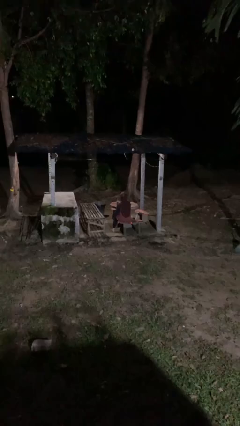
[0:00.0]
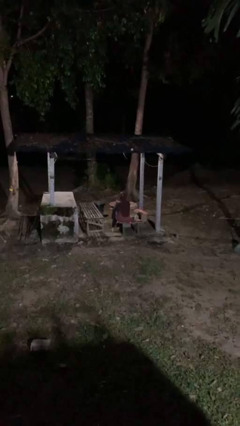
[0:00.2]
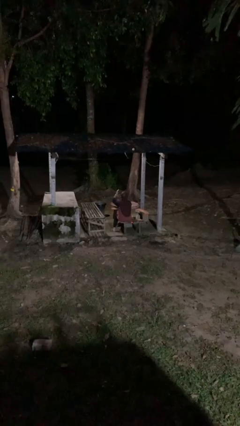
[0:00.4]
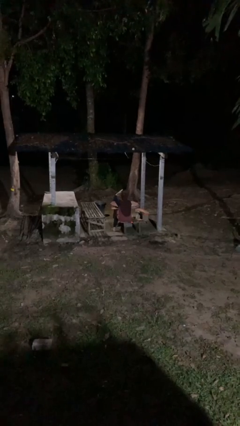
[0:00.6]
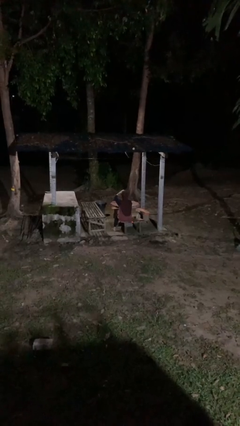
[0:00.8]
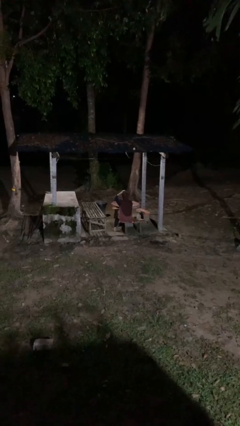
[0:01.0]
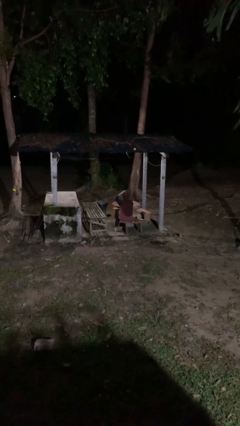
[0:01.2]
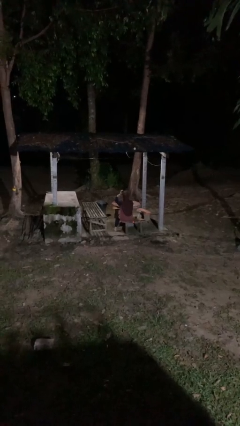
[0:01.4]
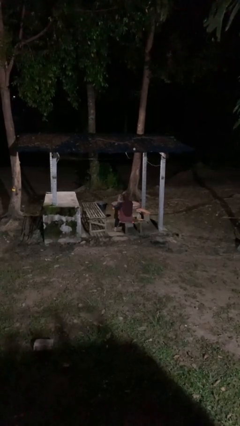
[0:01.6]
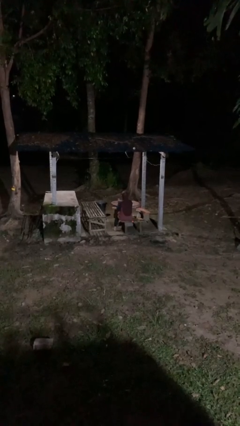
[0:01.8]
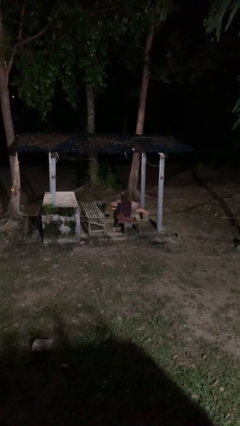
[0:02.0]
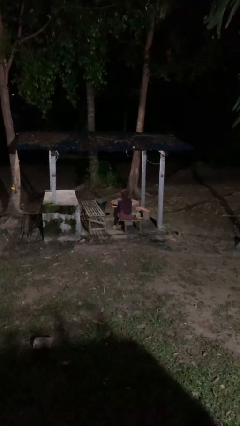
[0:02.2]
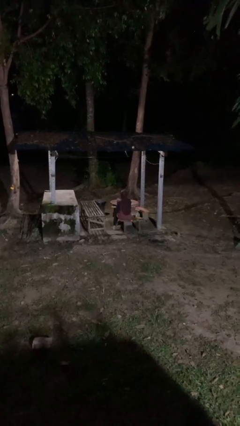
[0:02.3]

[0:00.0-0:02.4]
person pats head

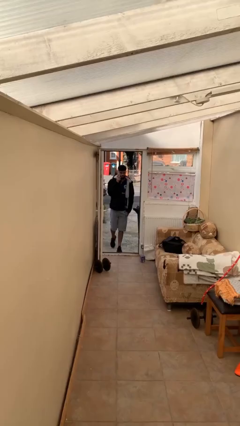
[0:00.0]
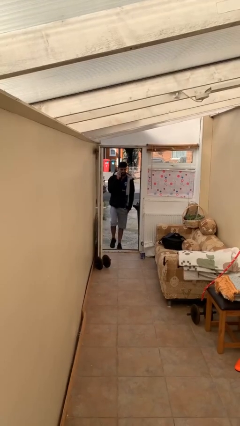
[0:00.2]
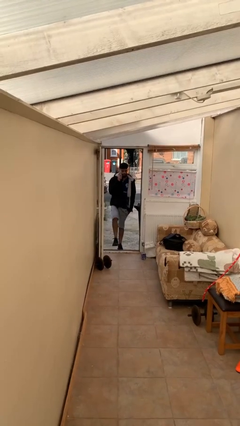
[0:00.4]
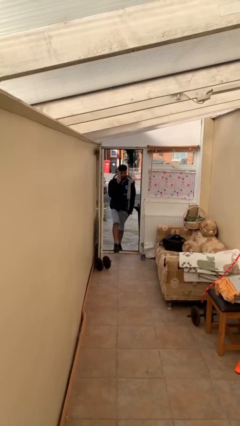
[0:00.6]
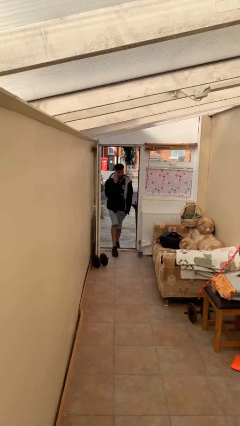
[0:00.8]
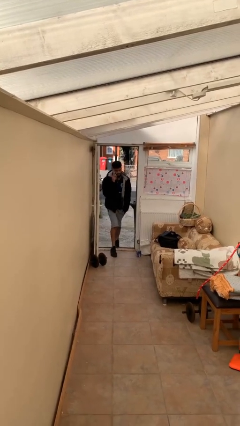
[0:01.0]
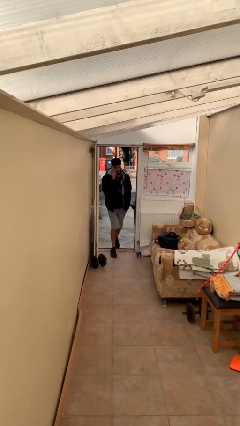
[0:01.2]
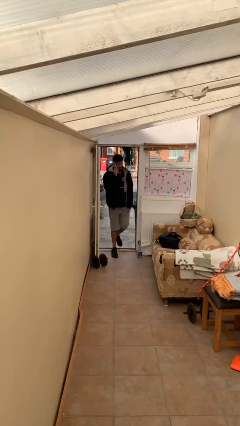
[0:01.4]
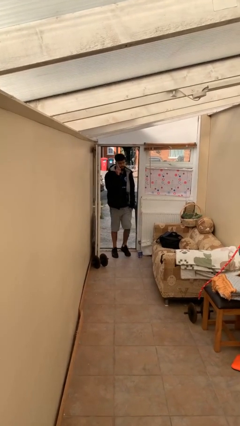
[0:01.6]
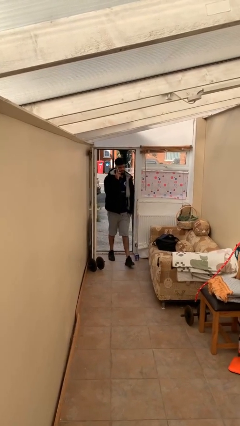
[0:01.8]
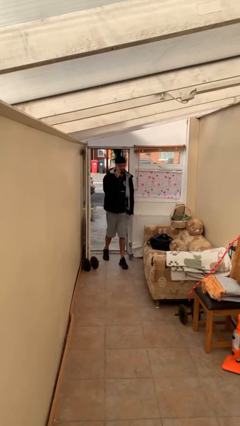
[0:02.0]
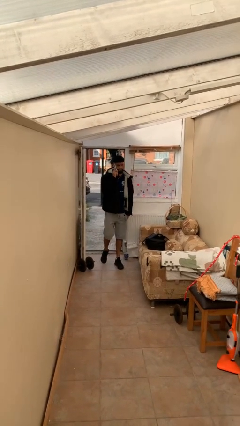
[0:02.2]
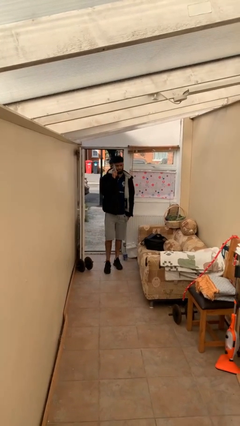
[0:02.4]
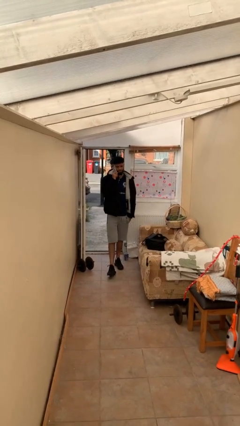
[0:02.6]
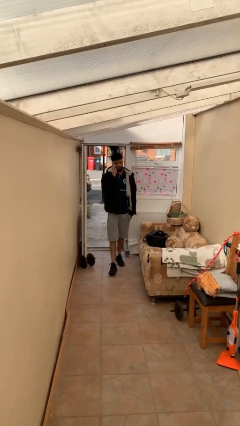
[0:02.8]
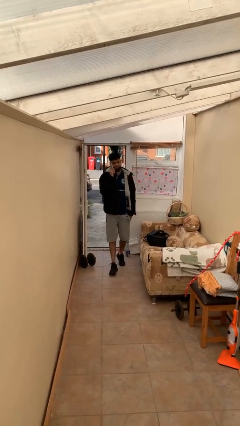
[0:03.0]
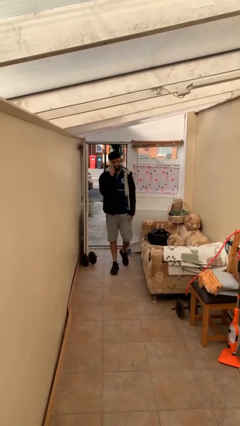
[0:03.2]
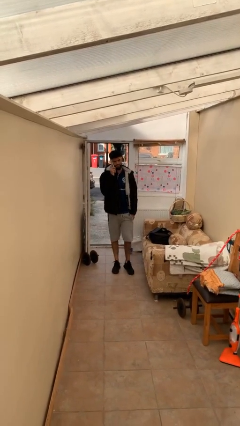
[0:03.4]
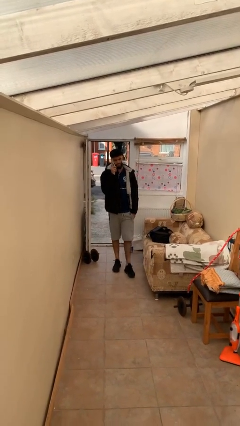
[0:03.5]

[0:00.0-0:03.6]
person enters scene through structure

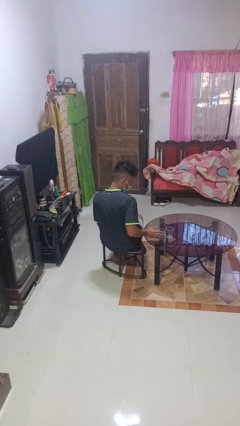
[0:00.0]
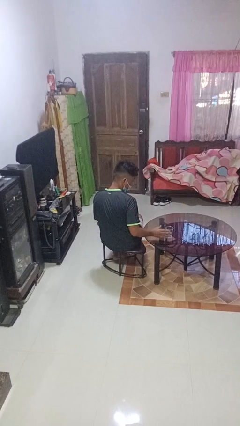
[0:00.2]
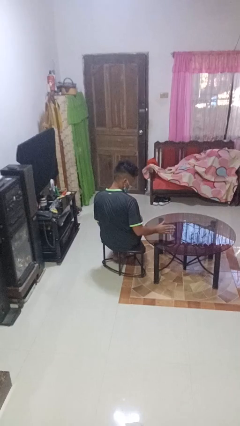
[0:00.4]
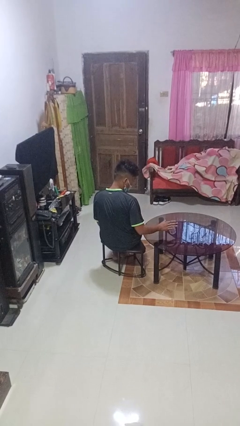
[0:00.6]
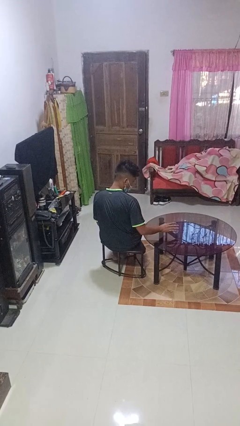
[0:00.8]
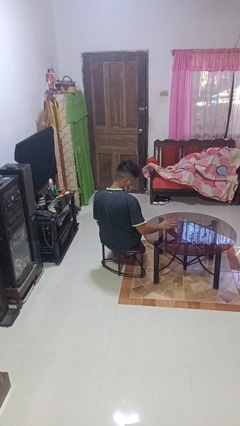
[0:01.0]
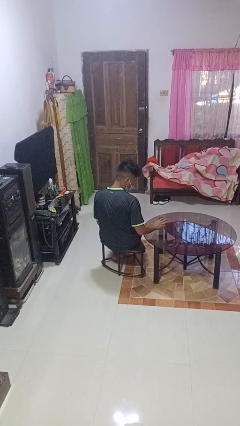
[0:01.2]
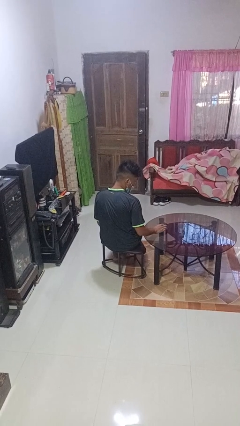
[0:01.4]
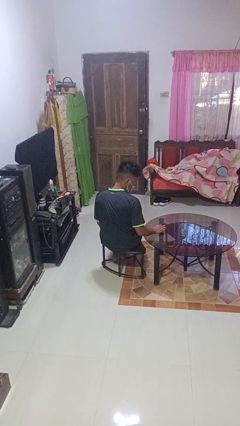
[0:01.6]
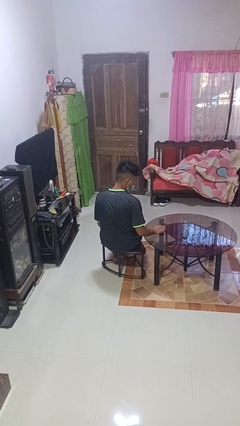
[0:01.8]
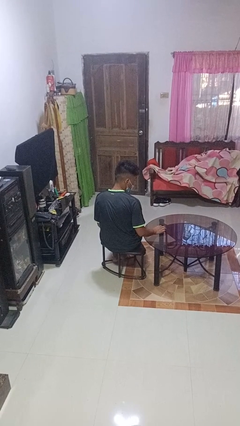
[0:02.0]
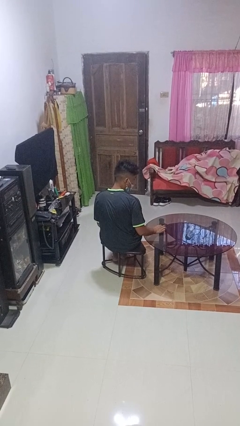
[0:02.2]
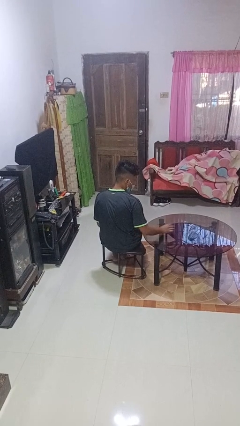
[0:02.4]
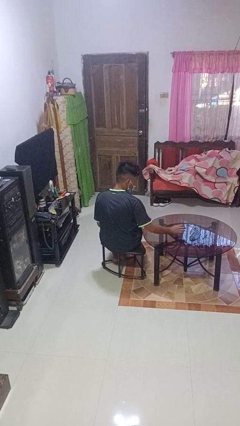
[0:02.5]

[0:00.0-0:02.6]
person knocks over glass

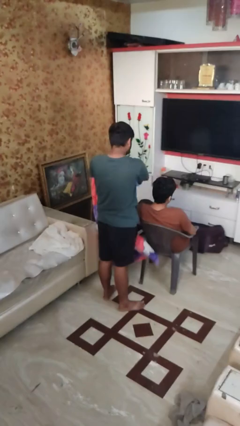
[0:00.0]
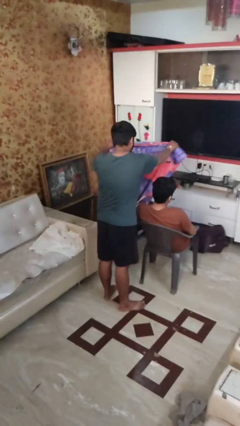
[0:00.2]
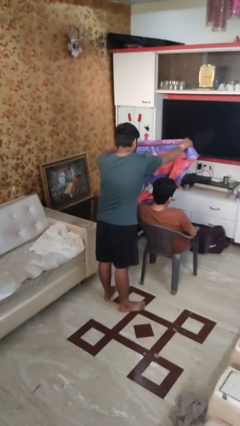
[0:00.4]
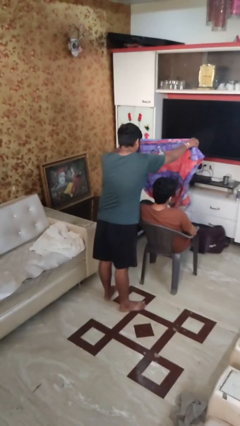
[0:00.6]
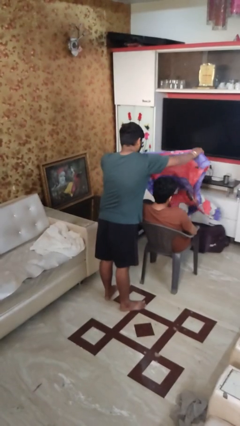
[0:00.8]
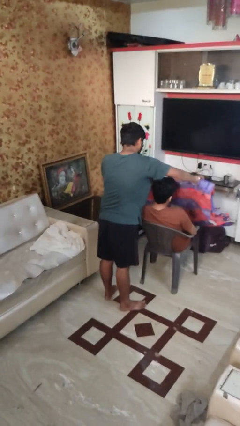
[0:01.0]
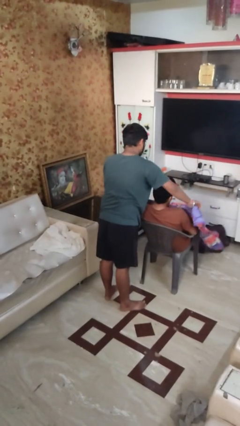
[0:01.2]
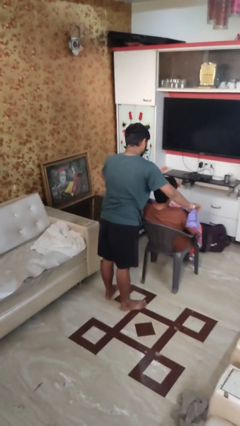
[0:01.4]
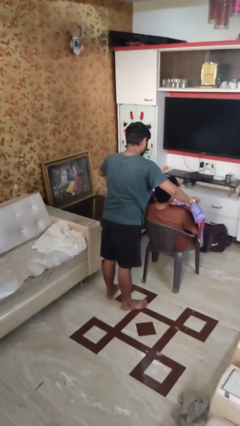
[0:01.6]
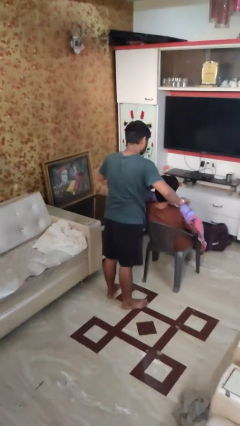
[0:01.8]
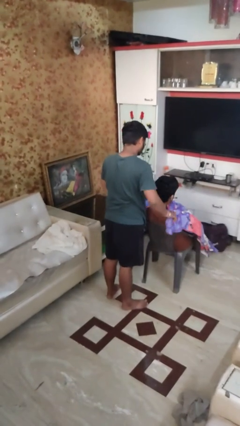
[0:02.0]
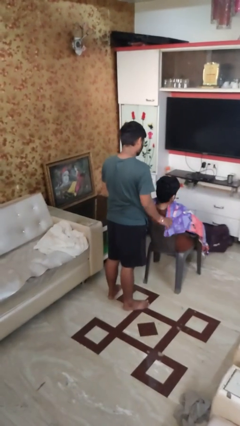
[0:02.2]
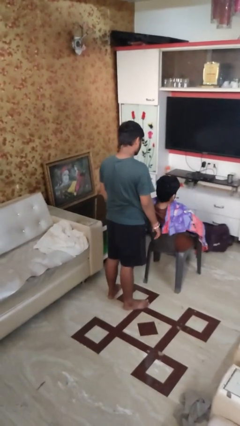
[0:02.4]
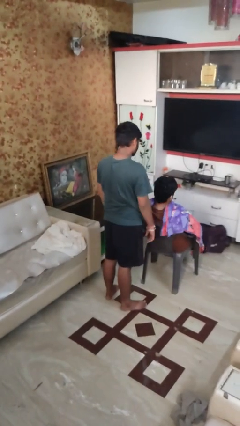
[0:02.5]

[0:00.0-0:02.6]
person covers friend with blanket

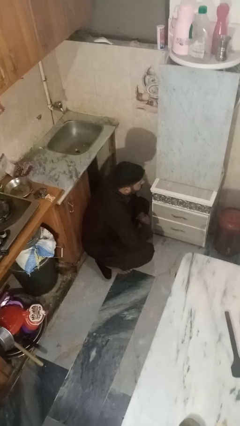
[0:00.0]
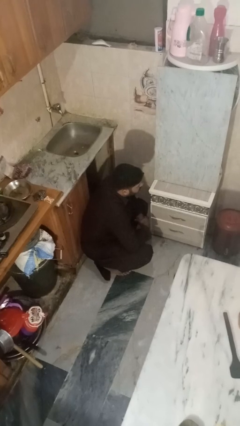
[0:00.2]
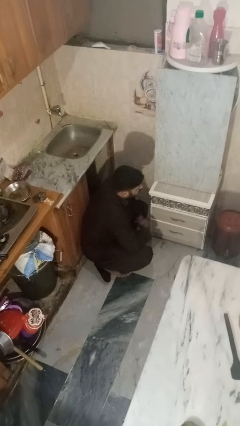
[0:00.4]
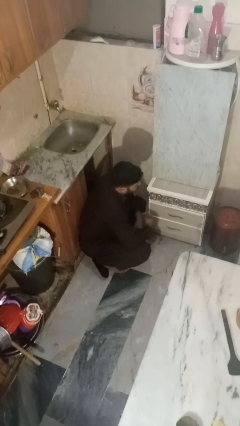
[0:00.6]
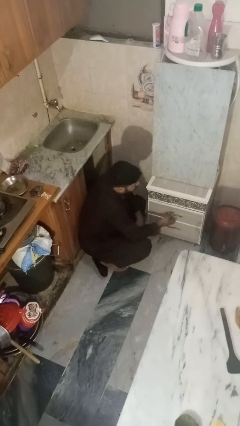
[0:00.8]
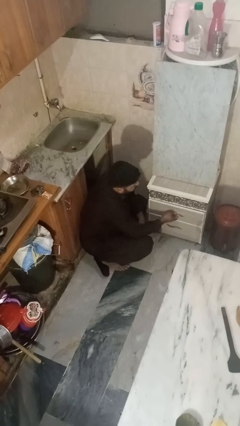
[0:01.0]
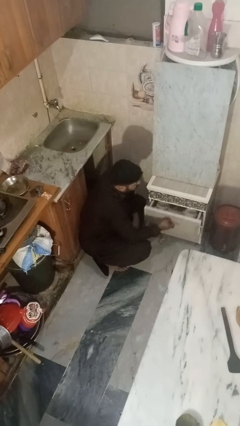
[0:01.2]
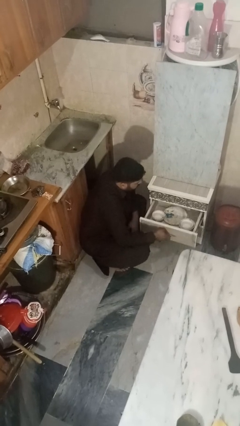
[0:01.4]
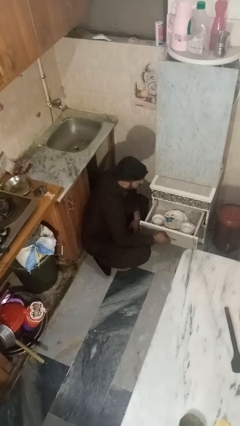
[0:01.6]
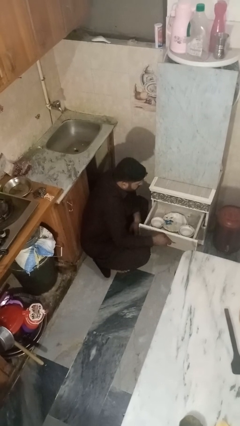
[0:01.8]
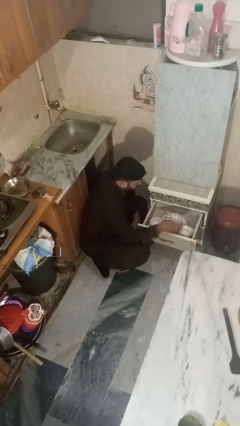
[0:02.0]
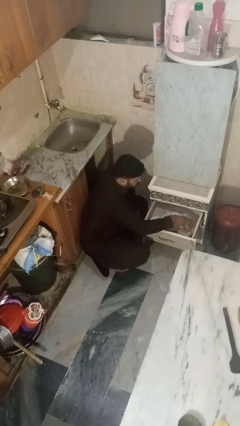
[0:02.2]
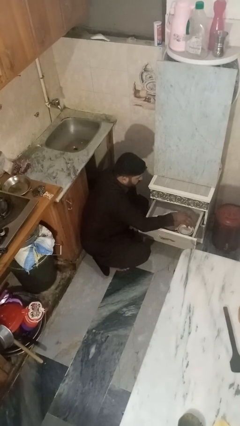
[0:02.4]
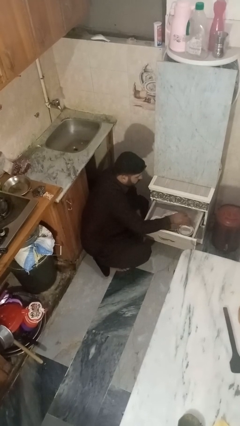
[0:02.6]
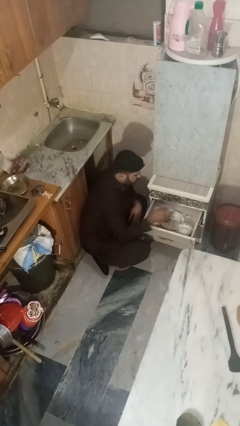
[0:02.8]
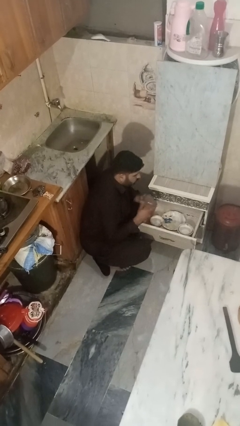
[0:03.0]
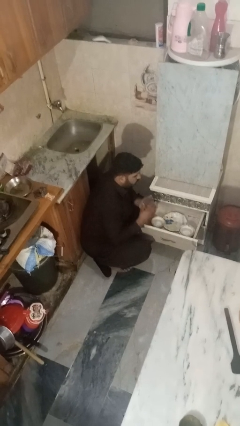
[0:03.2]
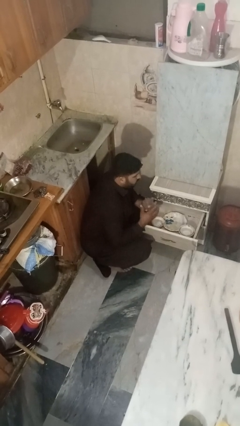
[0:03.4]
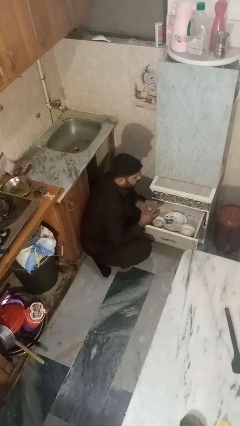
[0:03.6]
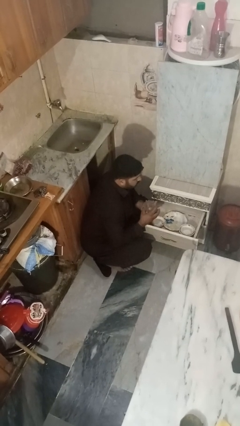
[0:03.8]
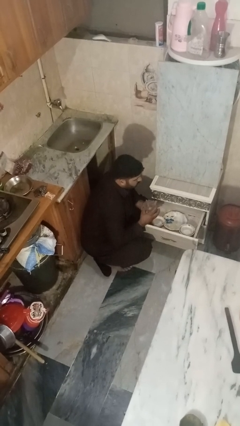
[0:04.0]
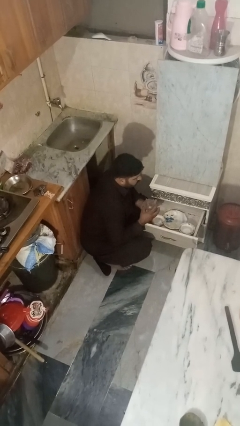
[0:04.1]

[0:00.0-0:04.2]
person takes object from kitchen drawer

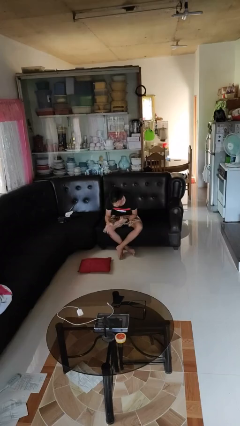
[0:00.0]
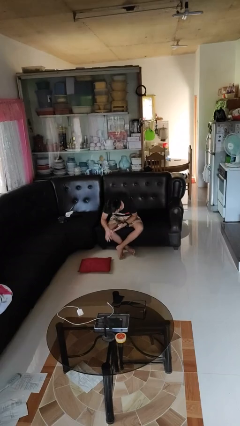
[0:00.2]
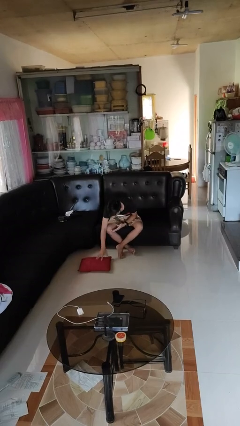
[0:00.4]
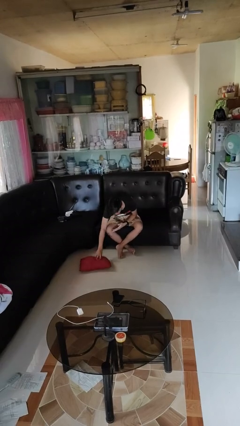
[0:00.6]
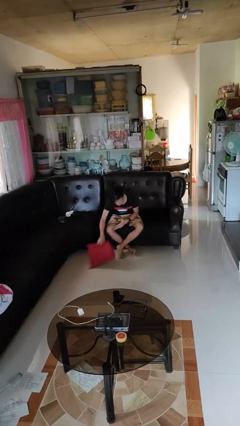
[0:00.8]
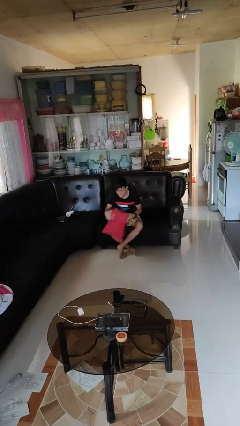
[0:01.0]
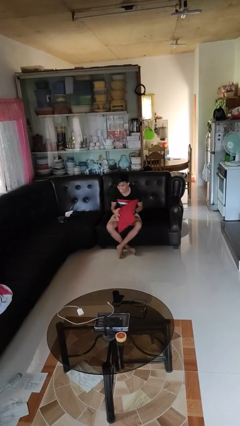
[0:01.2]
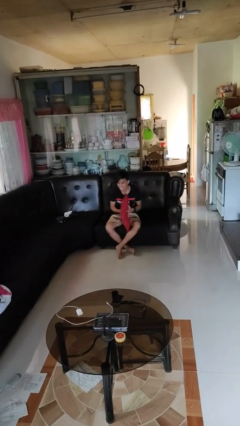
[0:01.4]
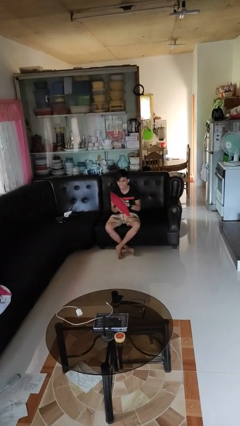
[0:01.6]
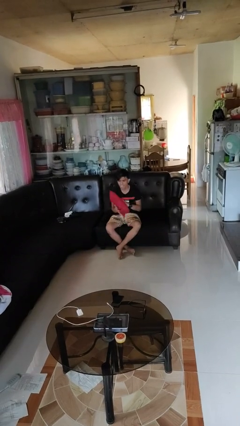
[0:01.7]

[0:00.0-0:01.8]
person picks up object from floor
